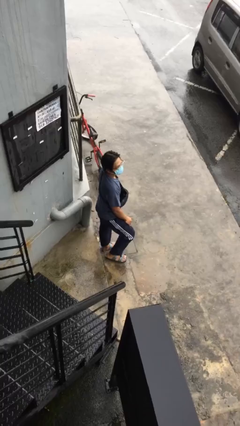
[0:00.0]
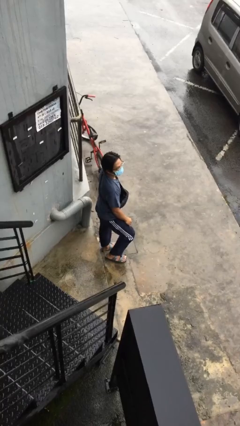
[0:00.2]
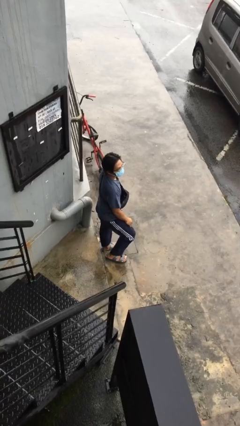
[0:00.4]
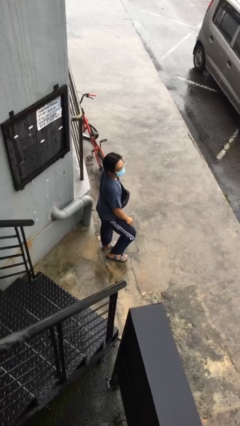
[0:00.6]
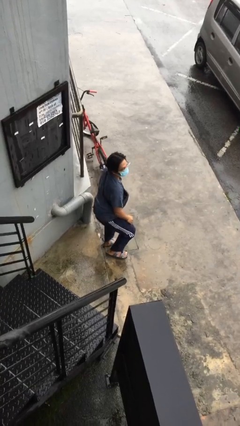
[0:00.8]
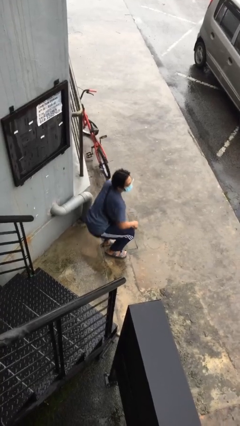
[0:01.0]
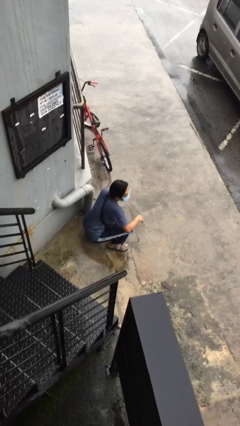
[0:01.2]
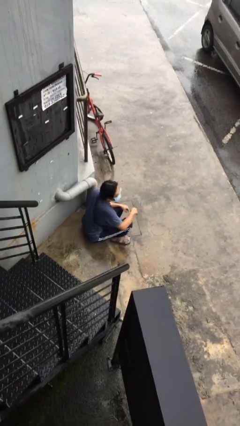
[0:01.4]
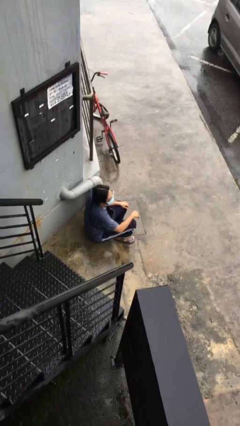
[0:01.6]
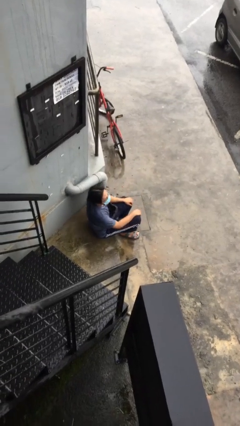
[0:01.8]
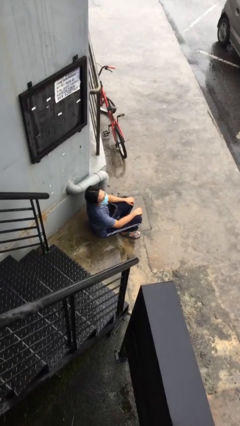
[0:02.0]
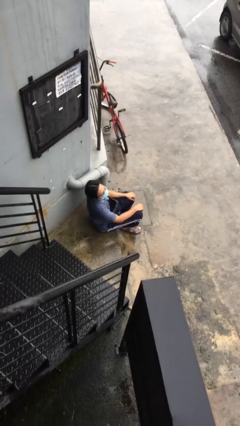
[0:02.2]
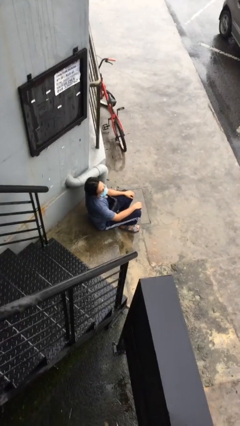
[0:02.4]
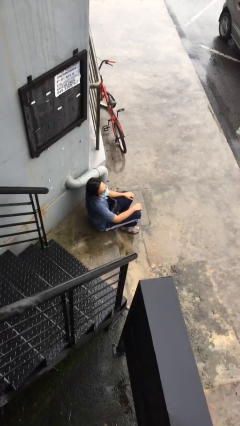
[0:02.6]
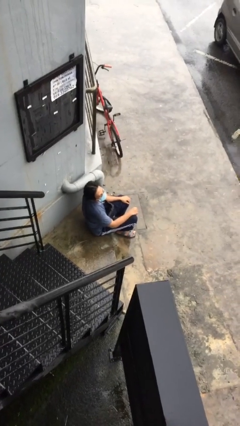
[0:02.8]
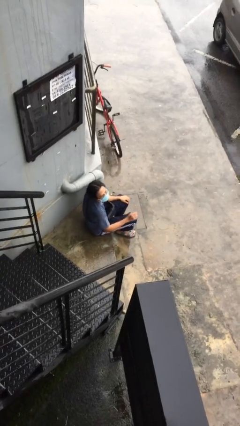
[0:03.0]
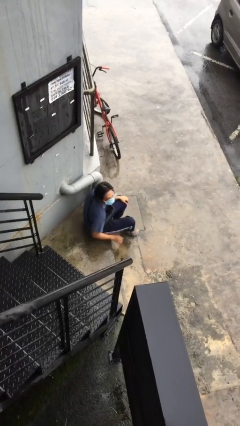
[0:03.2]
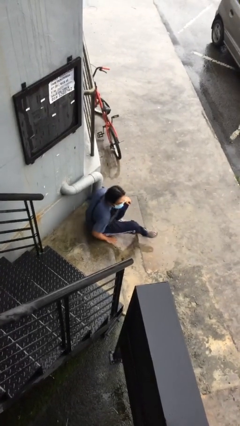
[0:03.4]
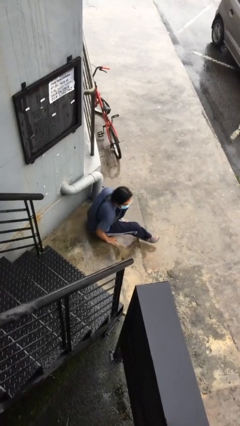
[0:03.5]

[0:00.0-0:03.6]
person sits down

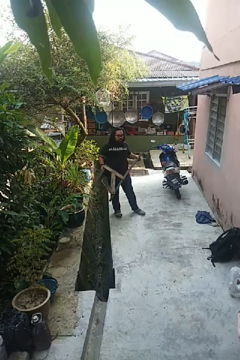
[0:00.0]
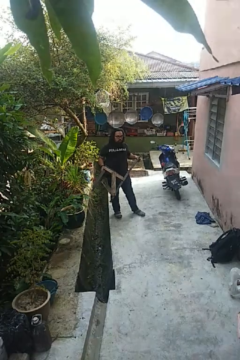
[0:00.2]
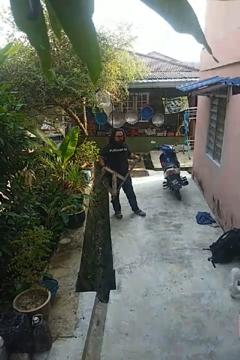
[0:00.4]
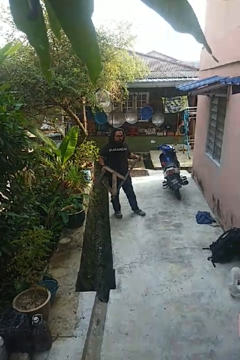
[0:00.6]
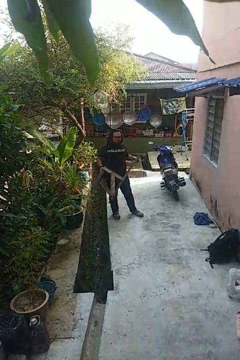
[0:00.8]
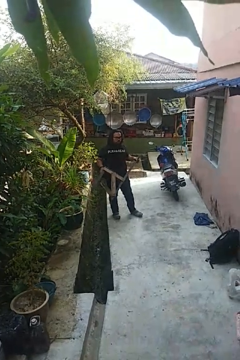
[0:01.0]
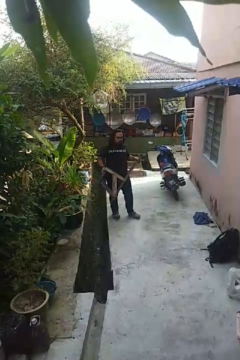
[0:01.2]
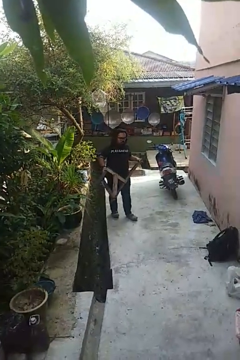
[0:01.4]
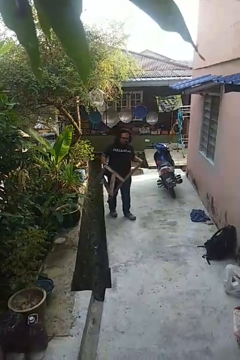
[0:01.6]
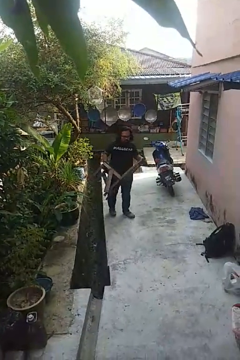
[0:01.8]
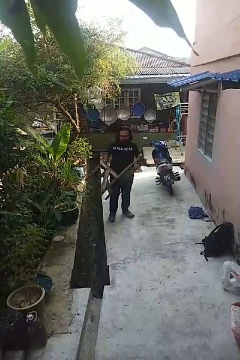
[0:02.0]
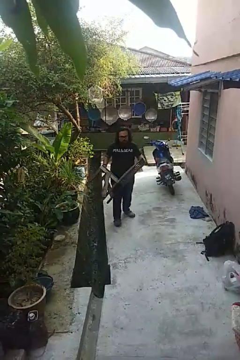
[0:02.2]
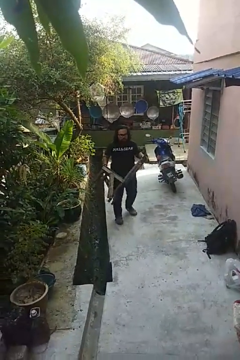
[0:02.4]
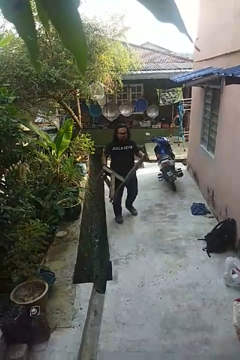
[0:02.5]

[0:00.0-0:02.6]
person carries furniture

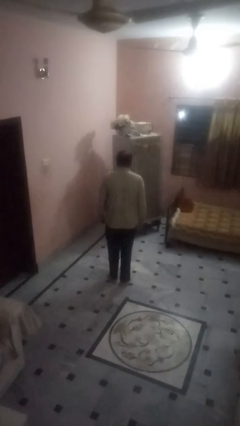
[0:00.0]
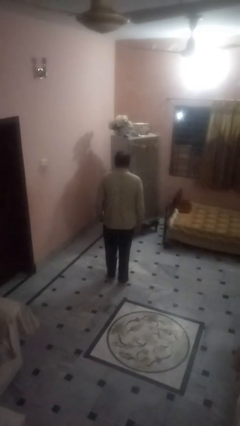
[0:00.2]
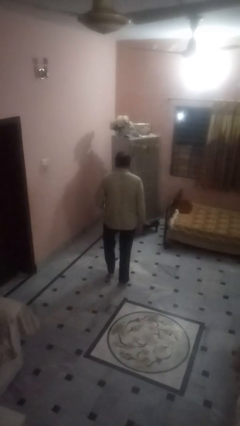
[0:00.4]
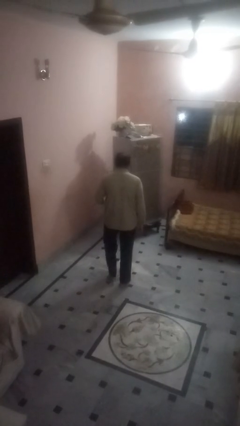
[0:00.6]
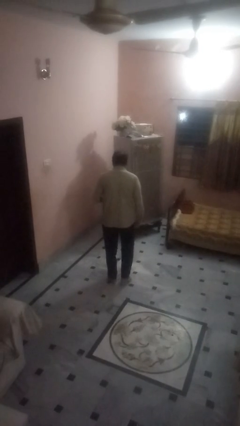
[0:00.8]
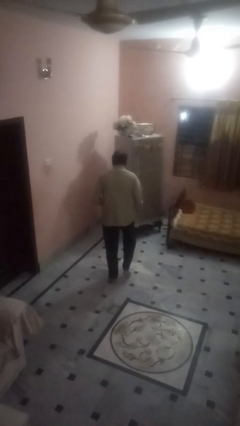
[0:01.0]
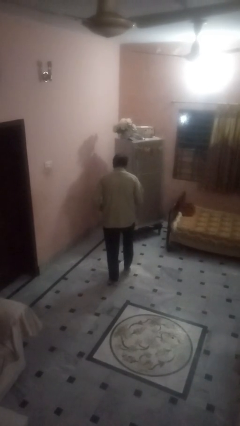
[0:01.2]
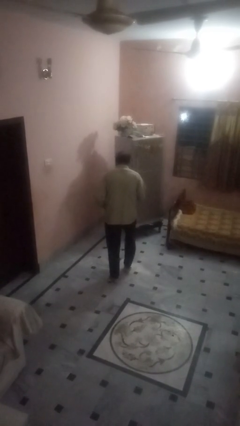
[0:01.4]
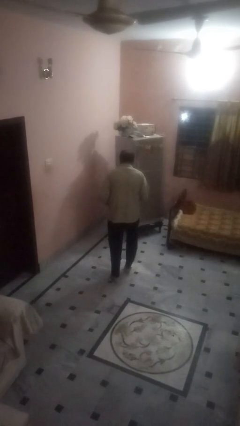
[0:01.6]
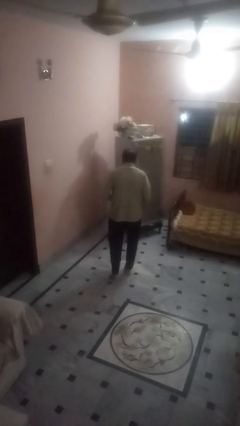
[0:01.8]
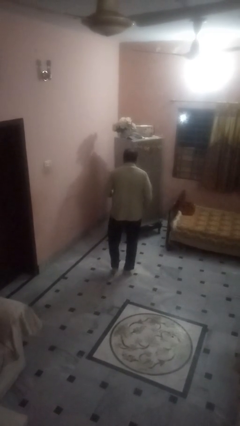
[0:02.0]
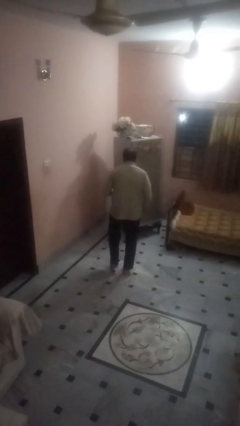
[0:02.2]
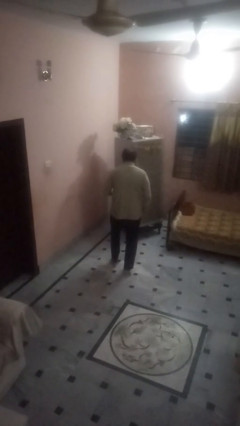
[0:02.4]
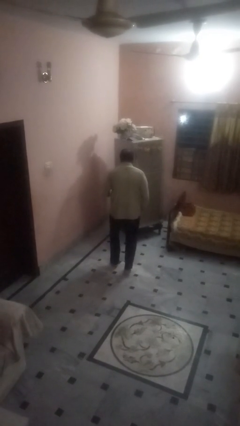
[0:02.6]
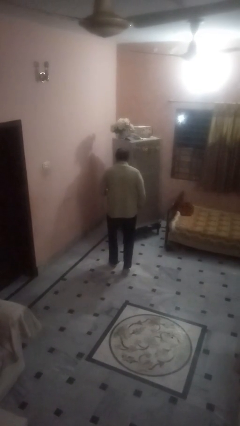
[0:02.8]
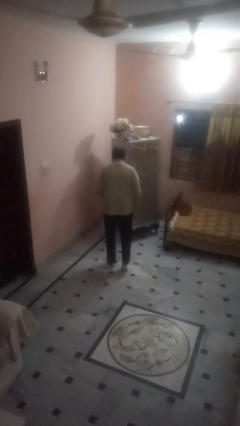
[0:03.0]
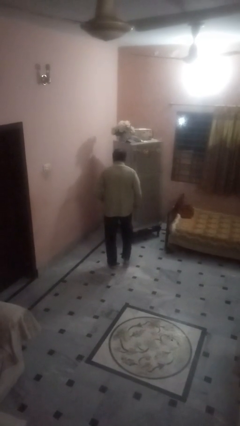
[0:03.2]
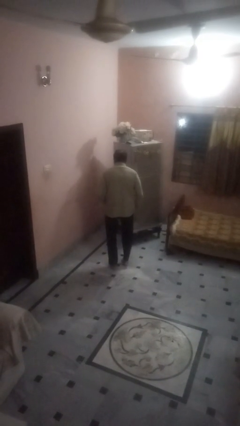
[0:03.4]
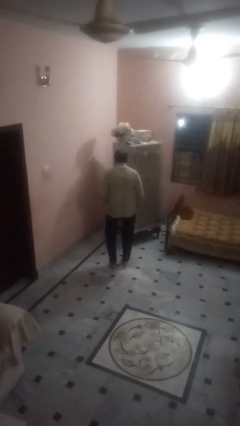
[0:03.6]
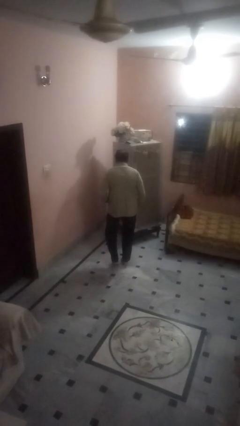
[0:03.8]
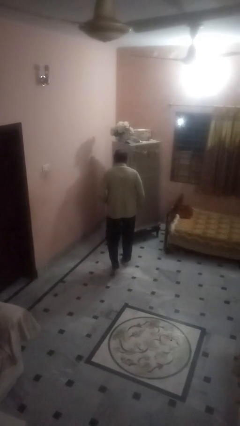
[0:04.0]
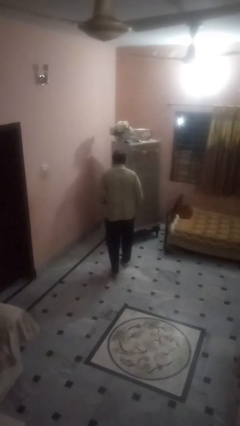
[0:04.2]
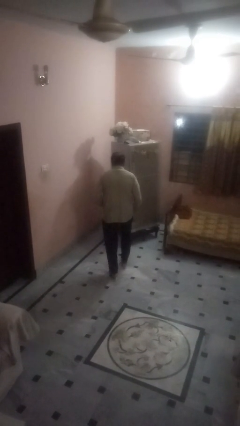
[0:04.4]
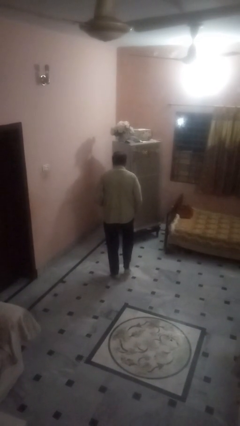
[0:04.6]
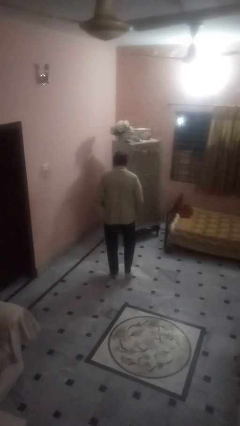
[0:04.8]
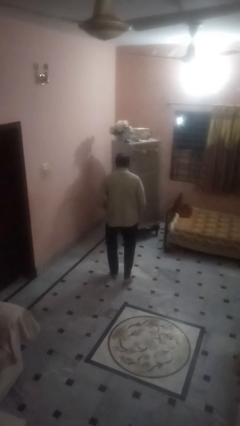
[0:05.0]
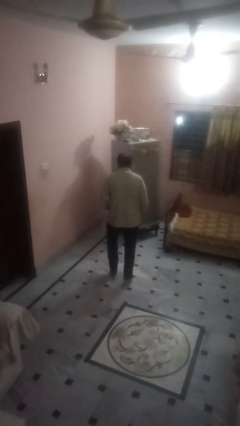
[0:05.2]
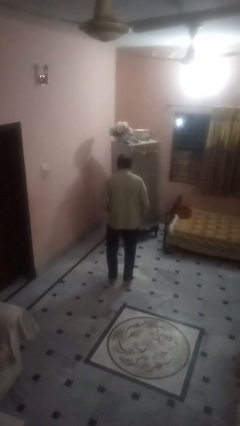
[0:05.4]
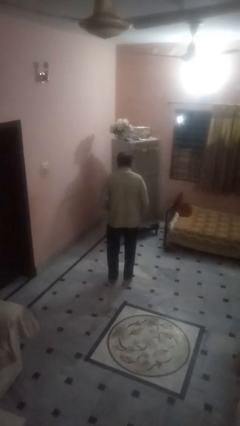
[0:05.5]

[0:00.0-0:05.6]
person walks tiptoe

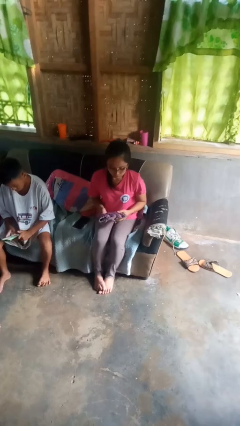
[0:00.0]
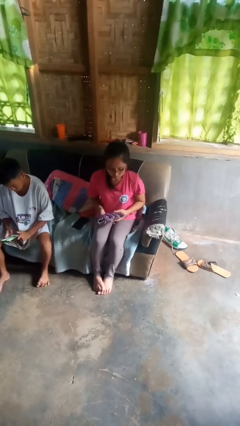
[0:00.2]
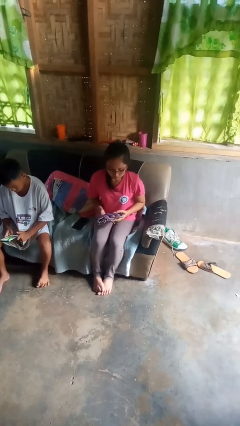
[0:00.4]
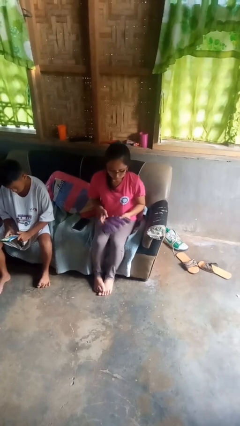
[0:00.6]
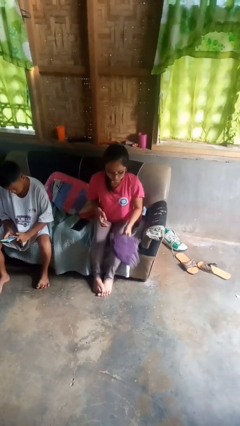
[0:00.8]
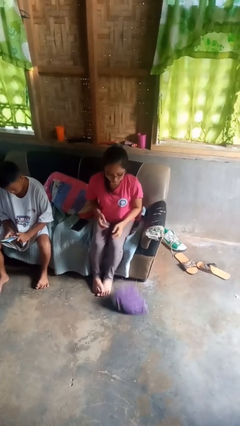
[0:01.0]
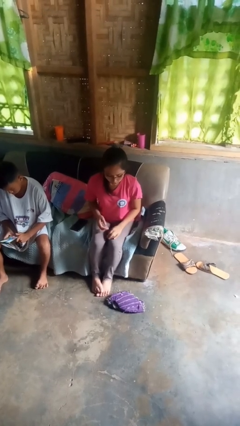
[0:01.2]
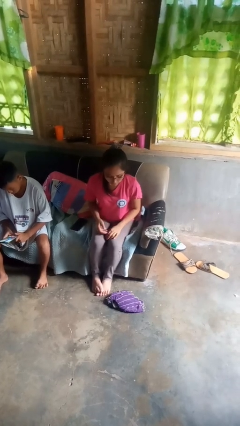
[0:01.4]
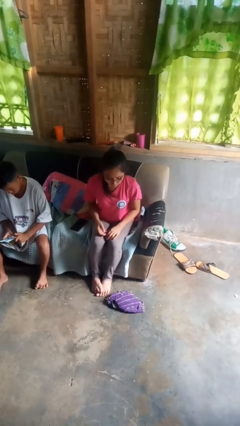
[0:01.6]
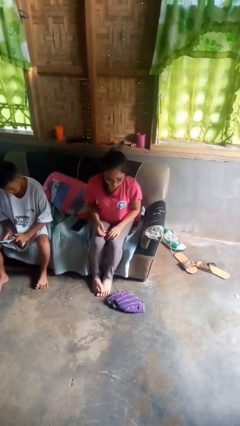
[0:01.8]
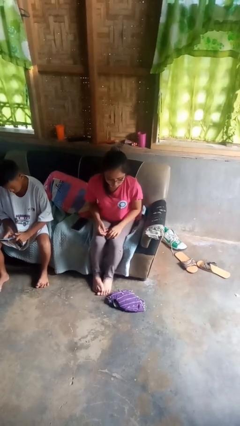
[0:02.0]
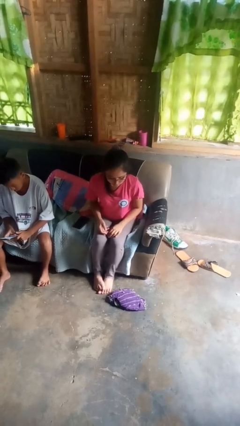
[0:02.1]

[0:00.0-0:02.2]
person drops object

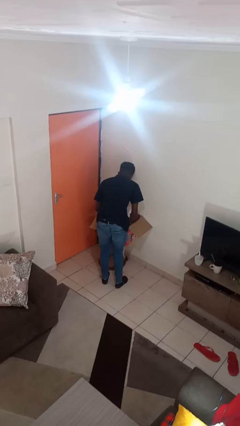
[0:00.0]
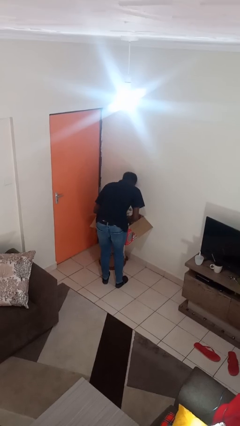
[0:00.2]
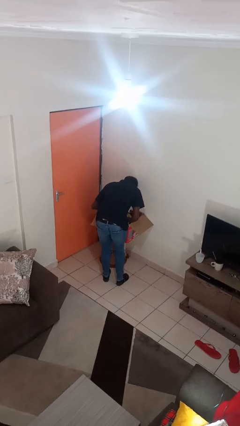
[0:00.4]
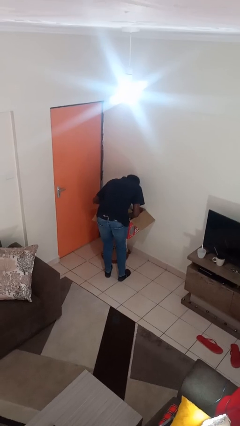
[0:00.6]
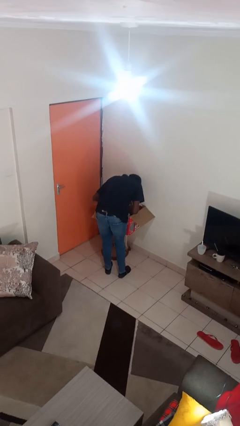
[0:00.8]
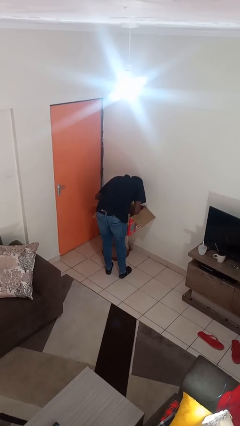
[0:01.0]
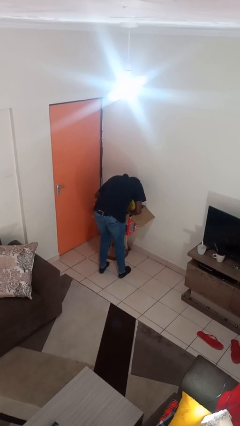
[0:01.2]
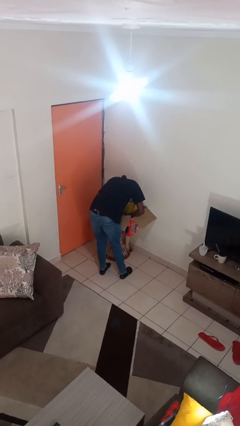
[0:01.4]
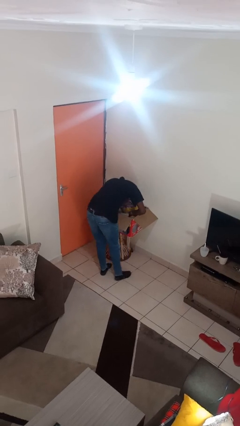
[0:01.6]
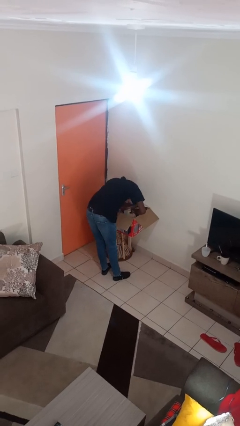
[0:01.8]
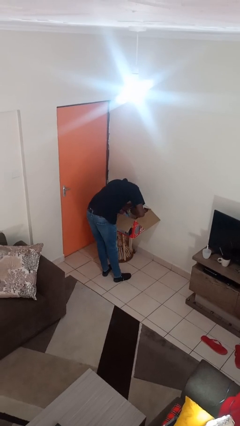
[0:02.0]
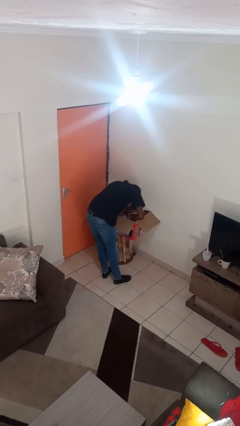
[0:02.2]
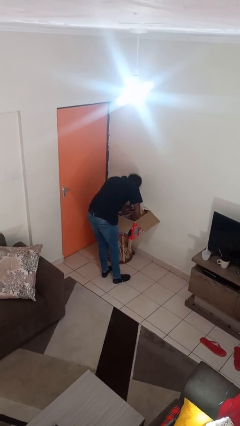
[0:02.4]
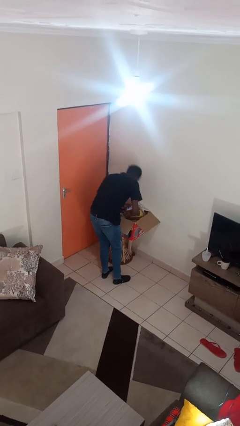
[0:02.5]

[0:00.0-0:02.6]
person searches in box

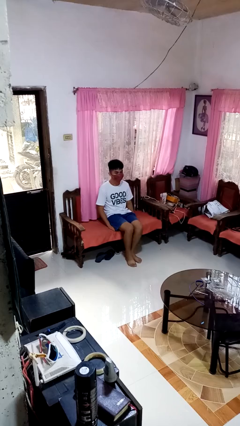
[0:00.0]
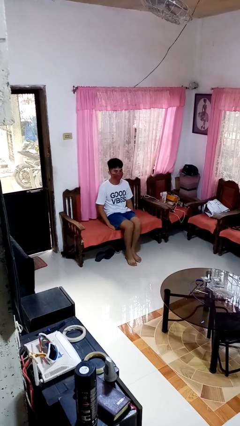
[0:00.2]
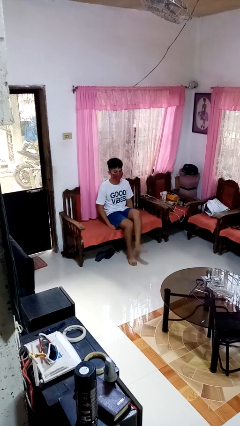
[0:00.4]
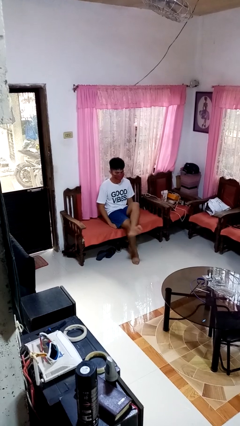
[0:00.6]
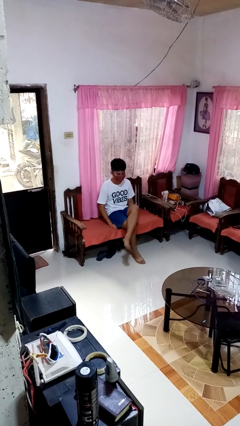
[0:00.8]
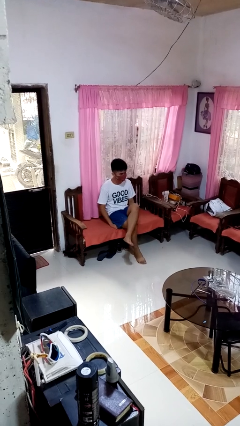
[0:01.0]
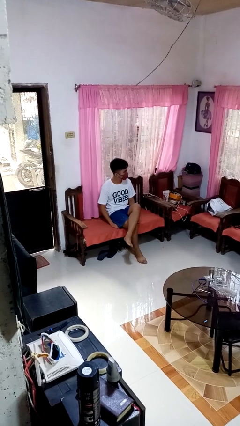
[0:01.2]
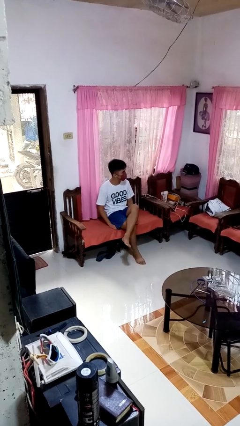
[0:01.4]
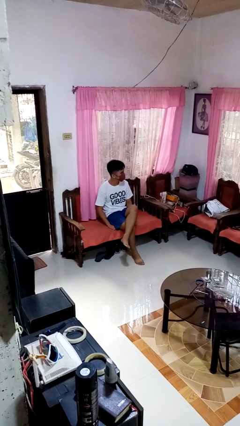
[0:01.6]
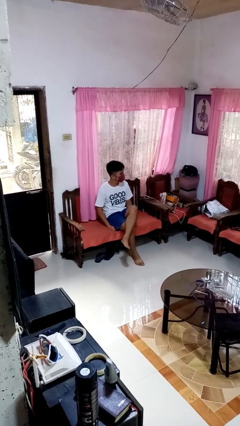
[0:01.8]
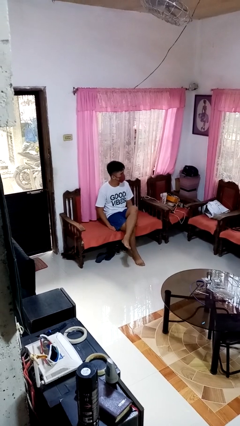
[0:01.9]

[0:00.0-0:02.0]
person crosses legs
